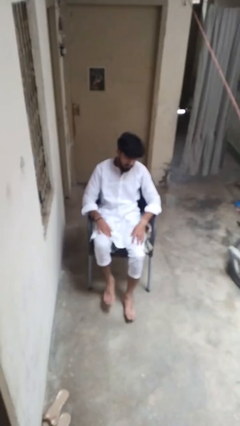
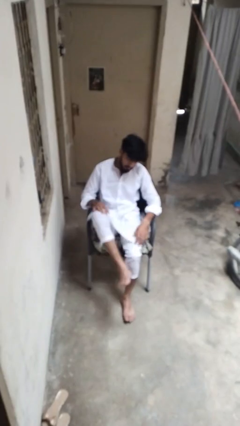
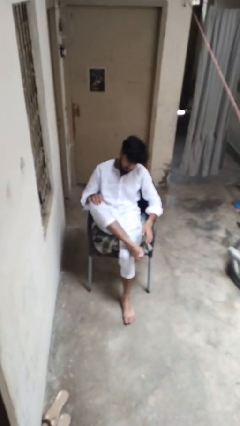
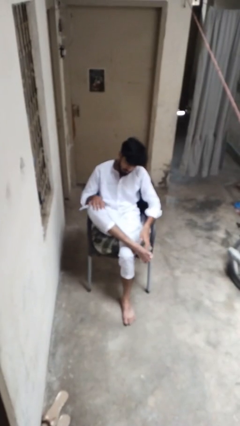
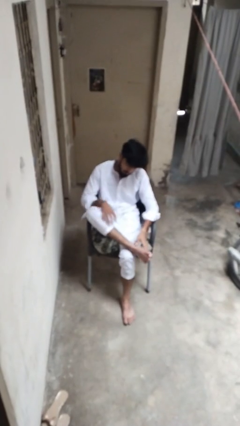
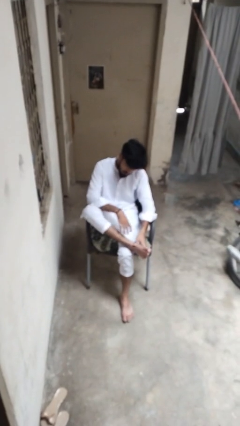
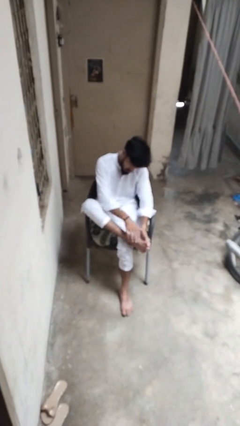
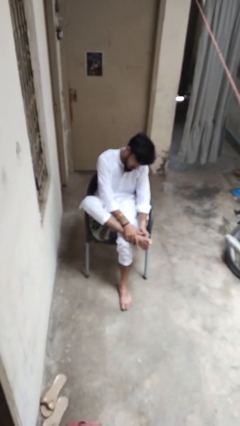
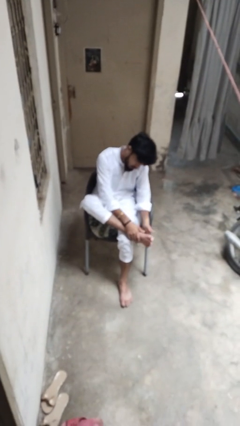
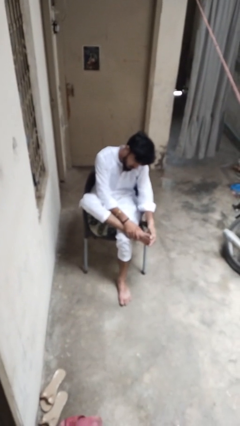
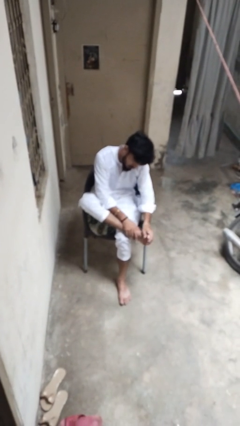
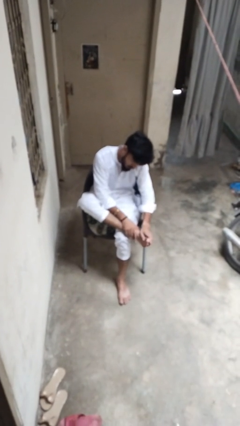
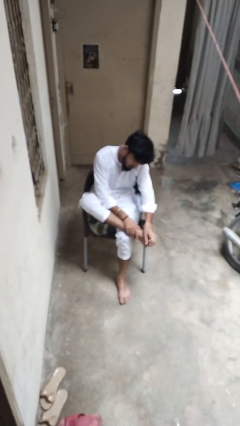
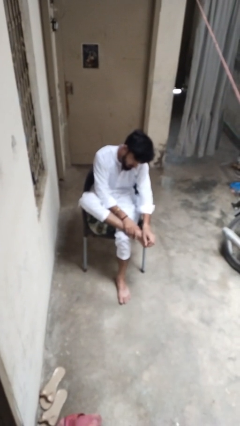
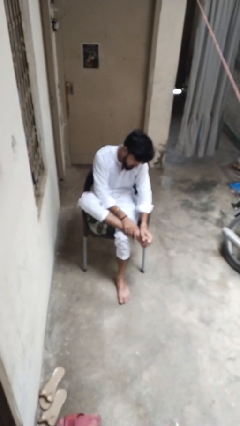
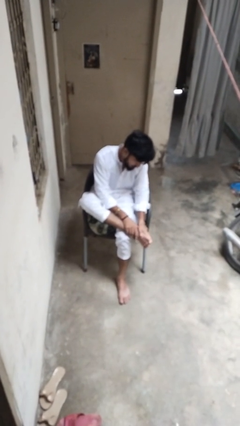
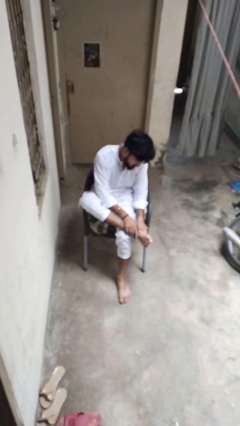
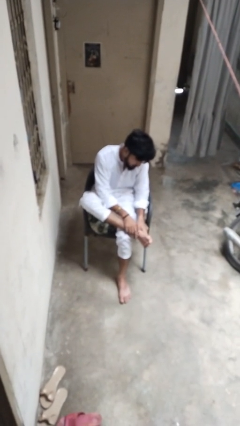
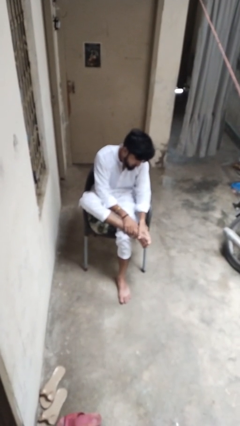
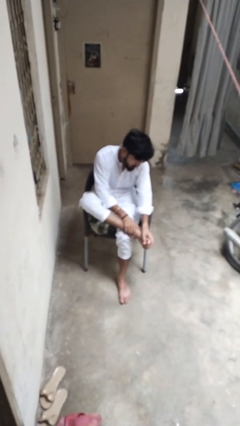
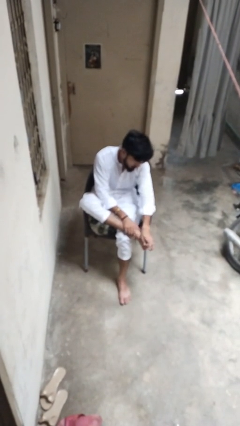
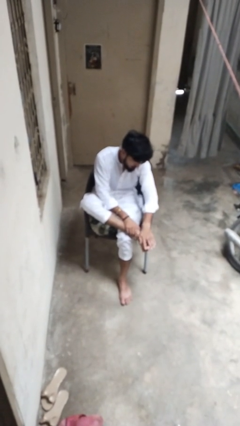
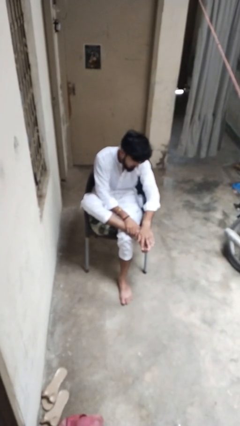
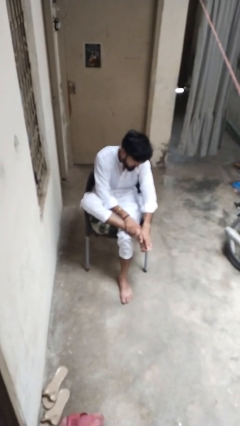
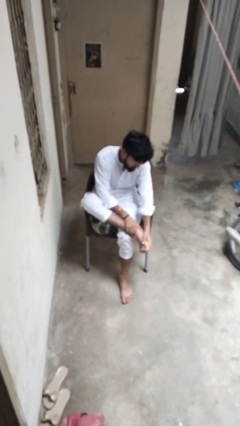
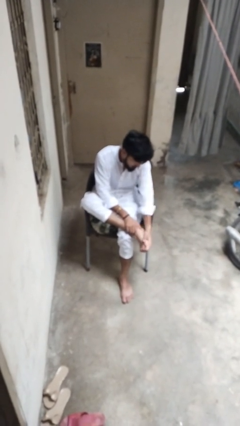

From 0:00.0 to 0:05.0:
person rubs foot

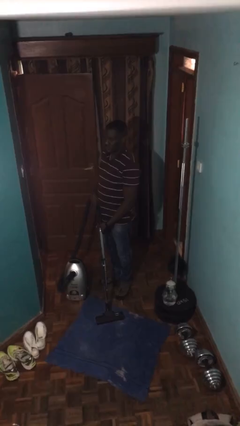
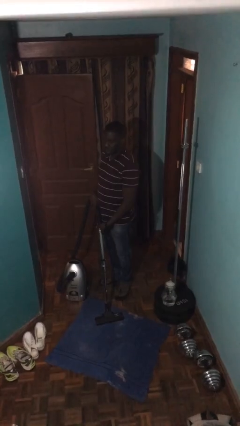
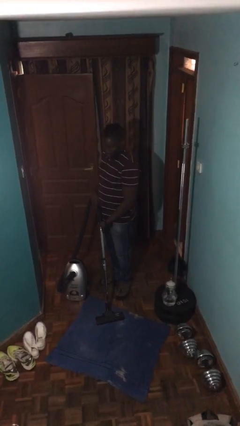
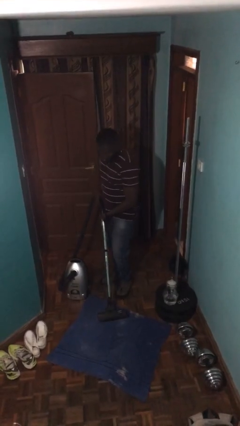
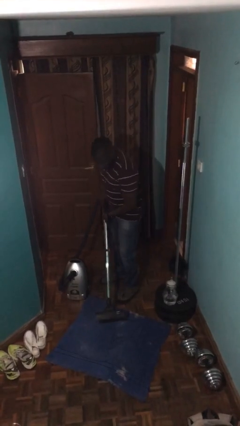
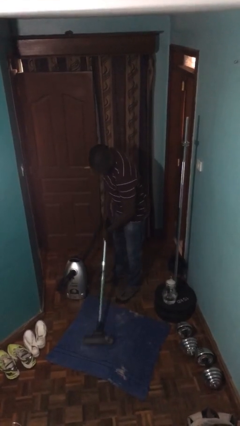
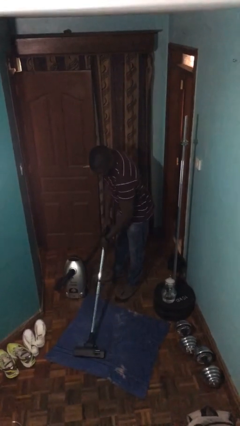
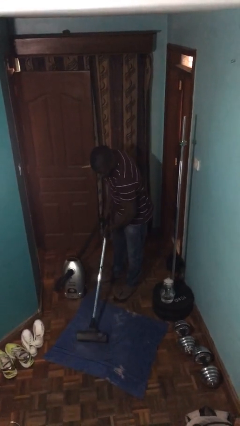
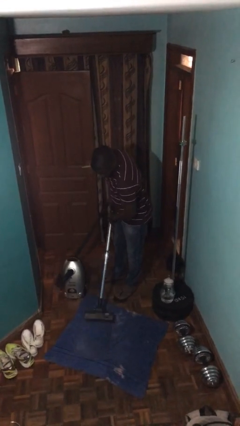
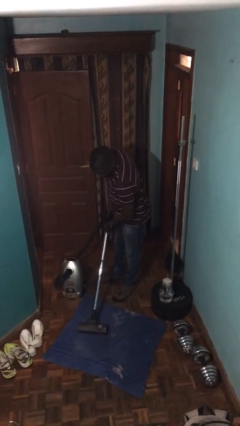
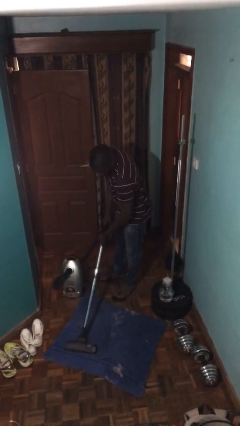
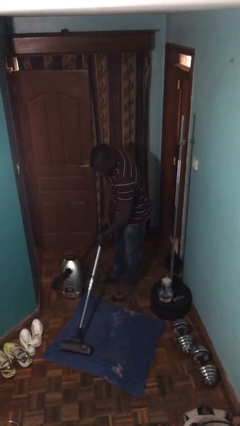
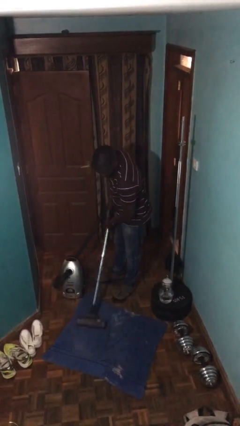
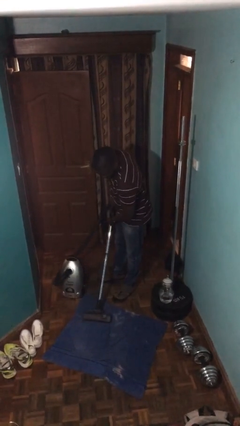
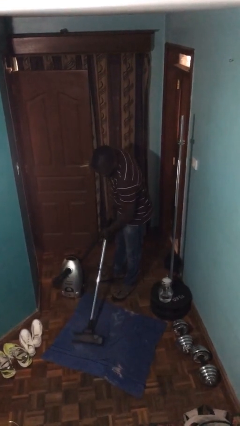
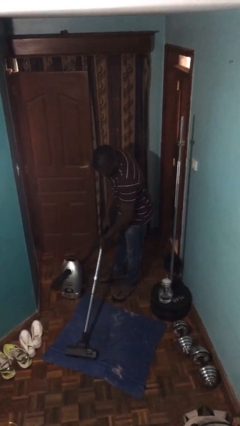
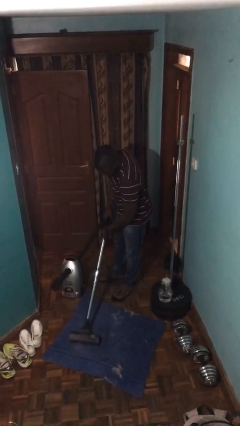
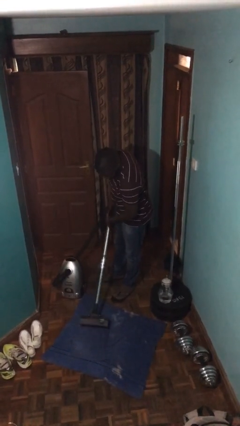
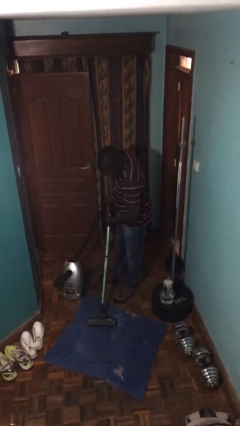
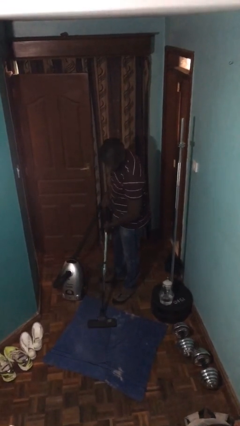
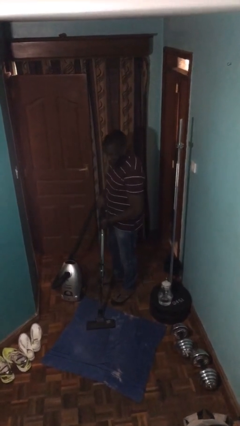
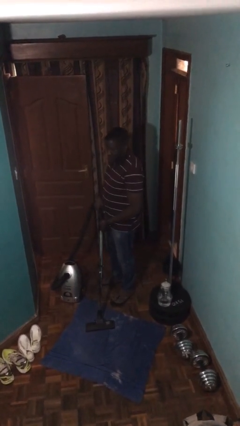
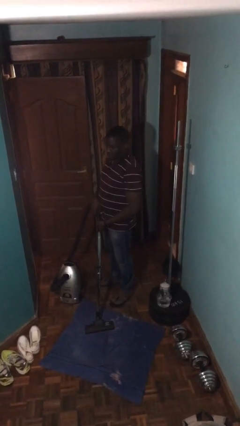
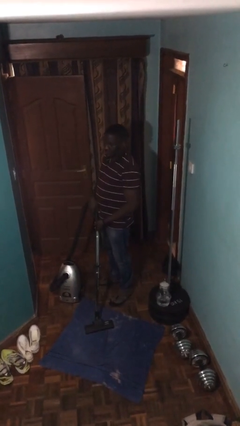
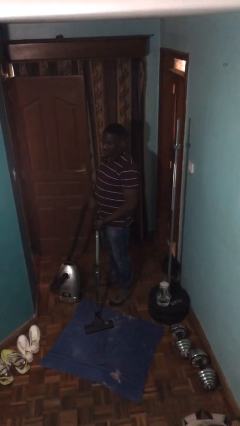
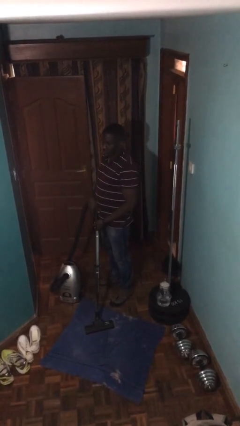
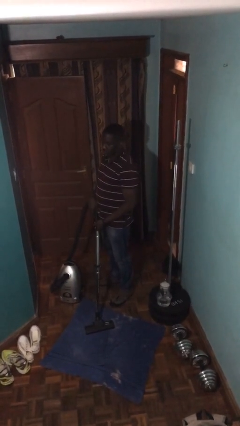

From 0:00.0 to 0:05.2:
person vacuums carpet

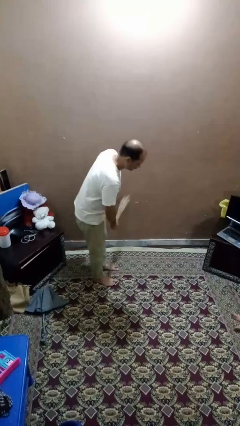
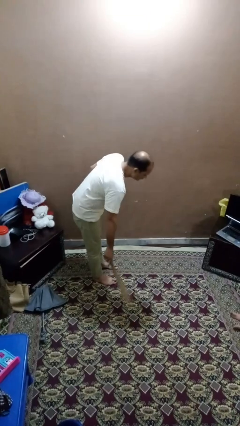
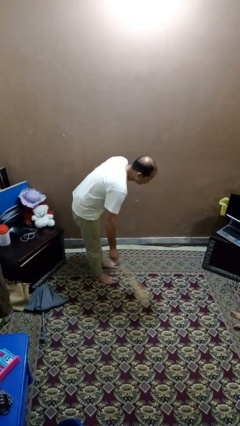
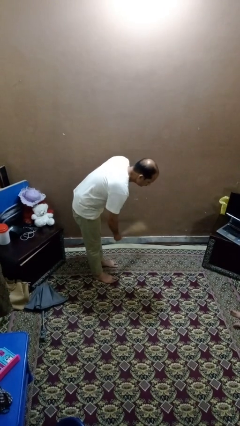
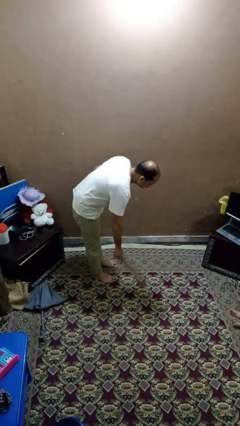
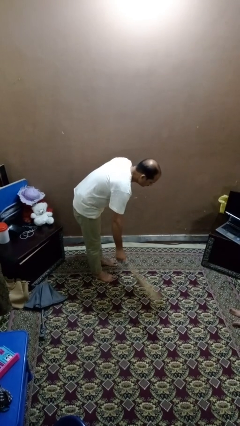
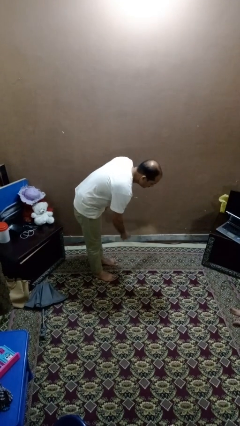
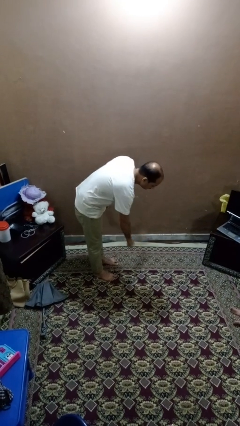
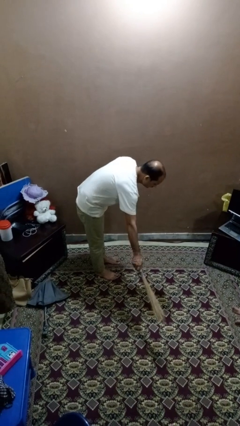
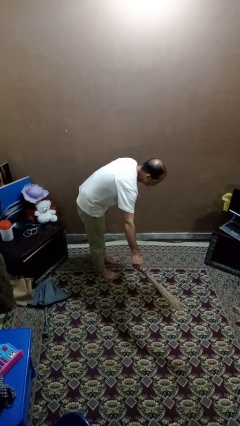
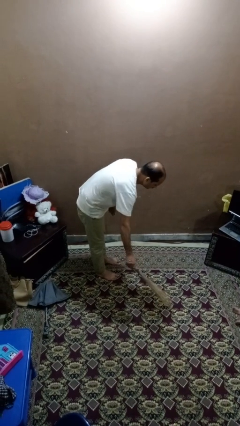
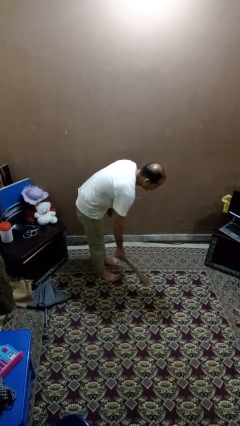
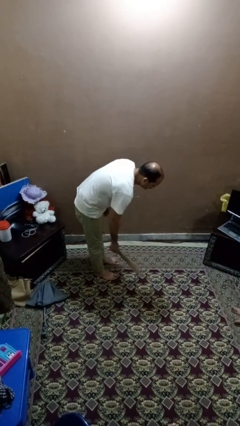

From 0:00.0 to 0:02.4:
person sweeps floor

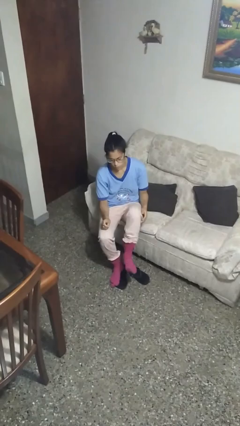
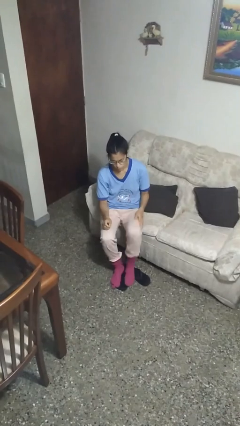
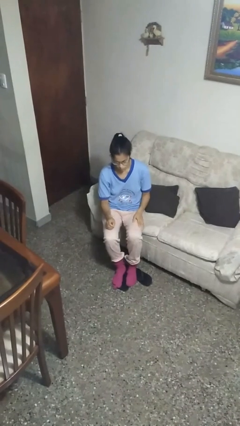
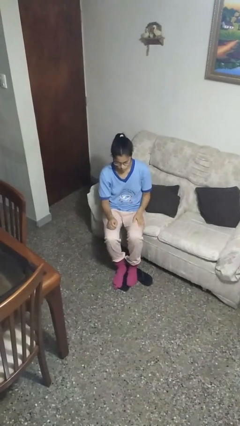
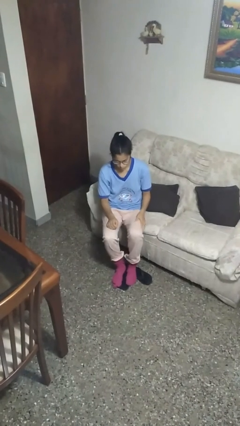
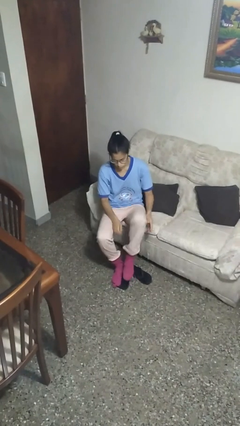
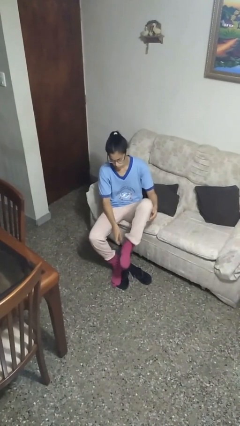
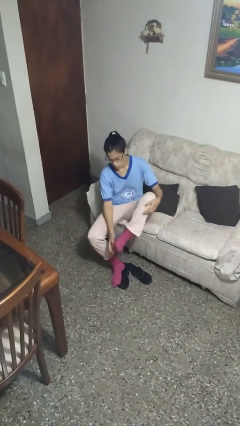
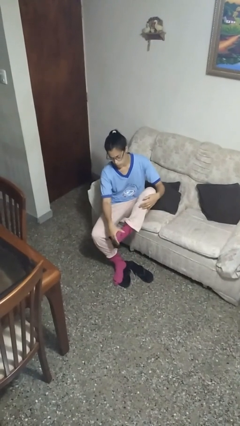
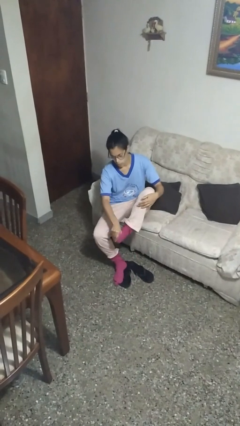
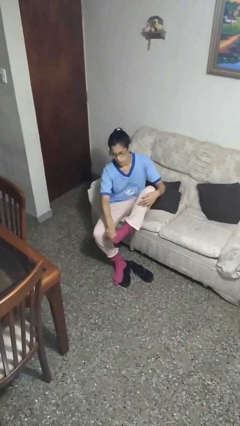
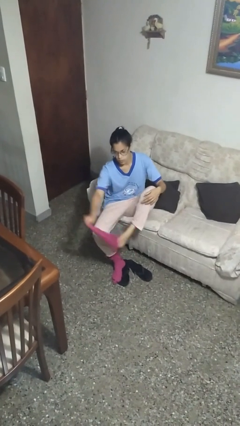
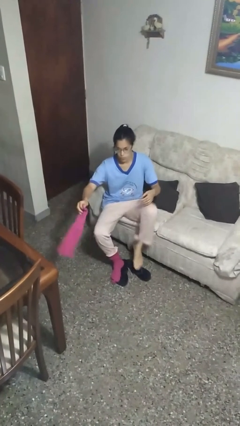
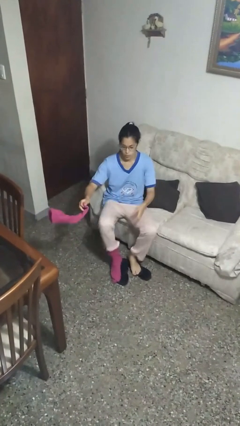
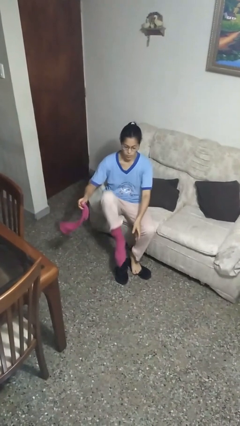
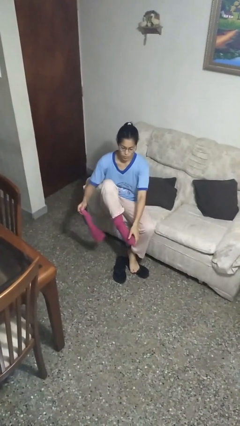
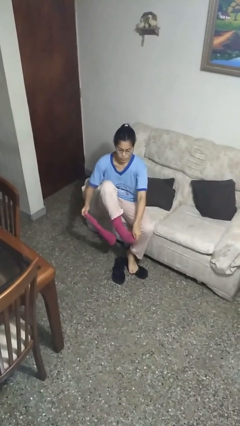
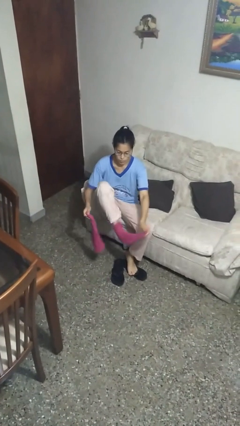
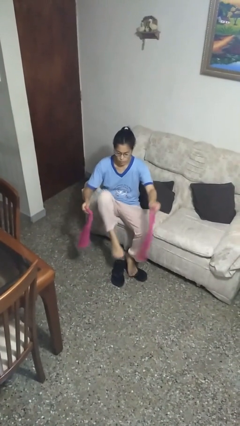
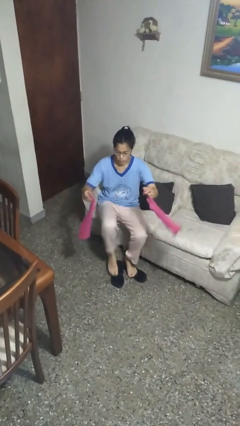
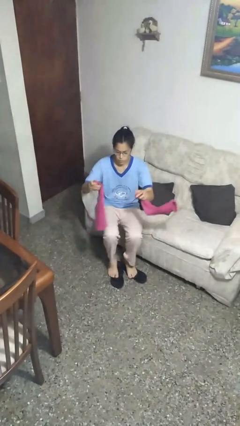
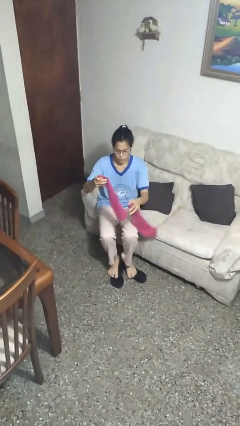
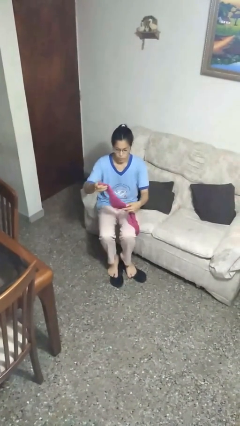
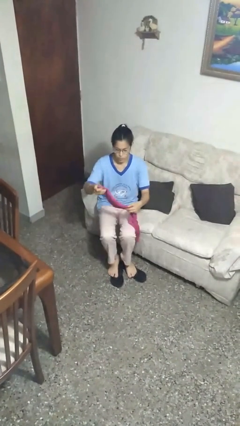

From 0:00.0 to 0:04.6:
person takes off necklace

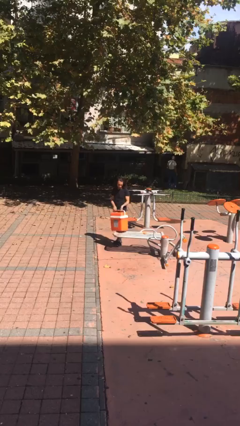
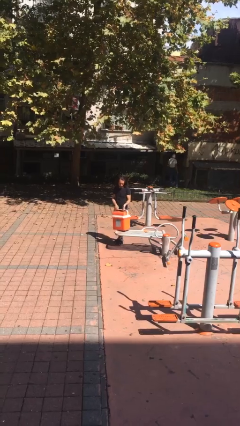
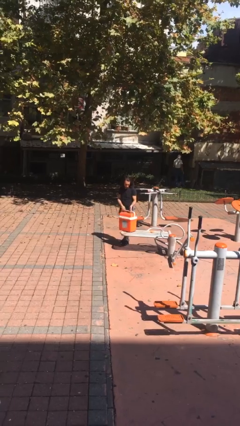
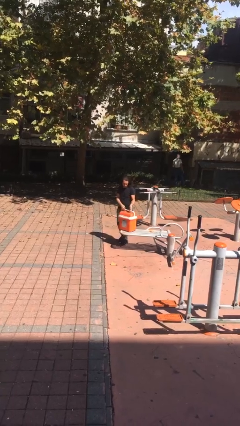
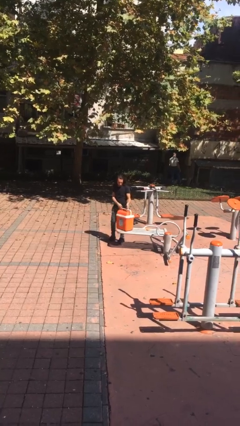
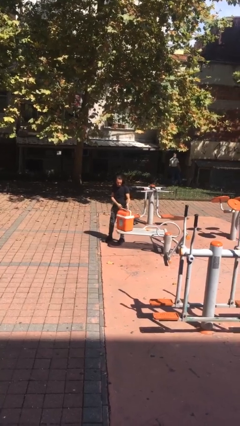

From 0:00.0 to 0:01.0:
person puts down object on table
